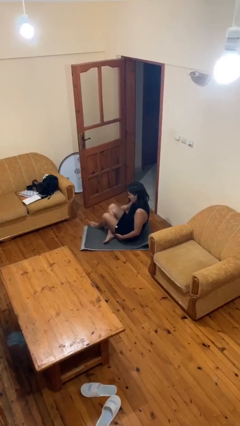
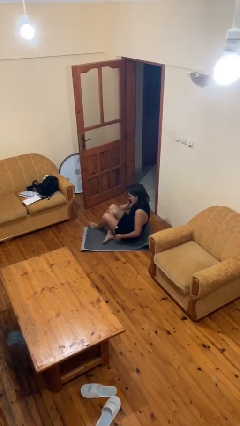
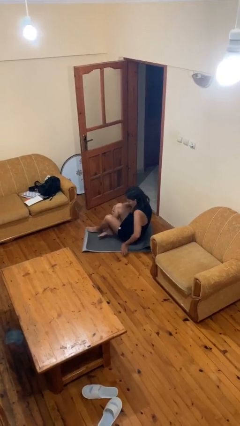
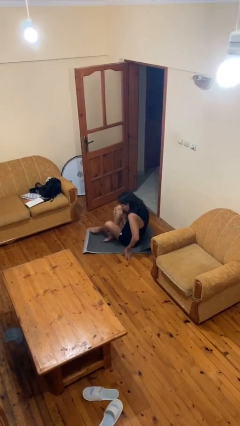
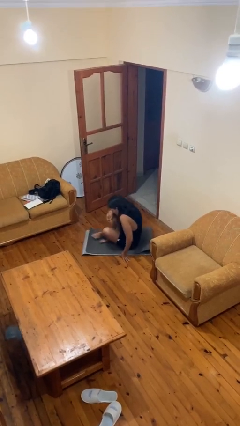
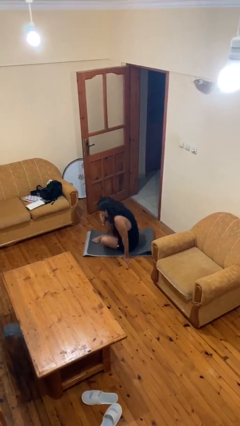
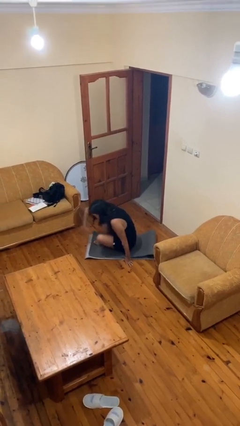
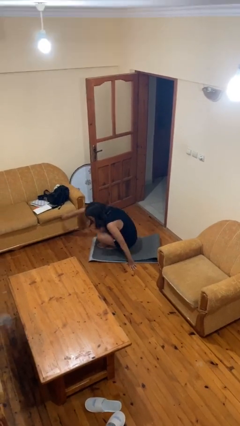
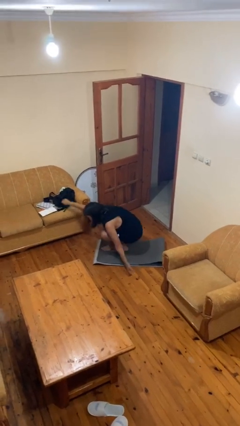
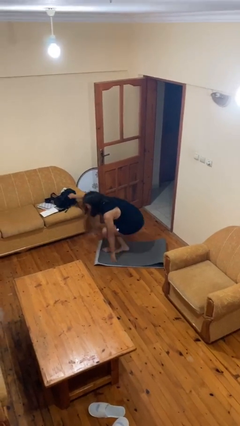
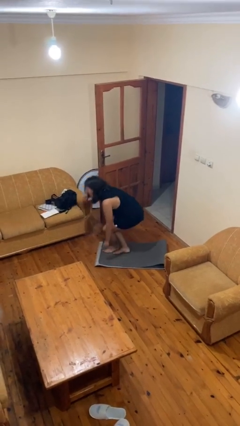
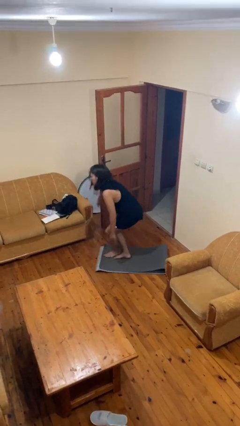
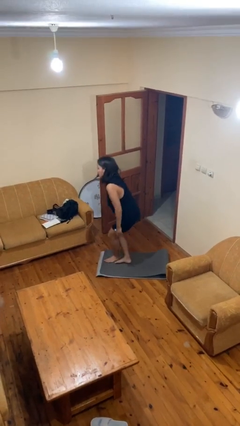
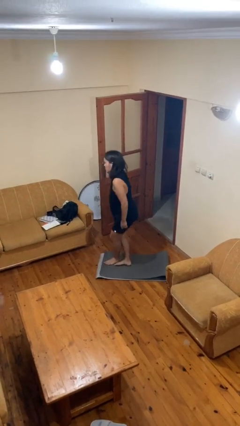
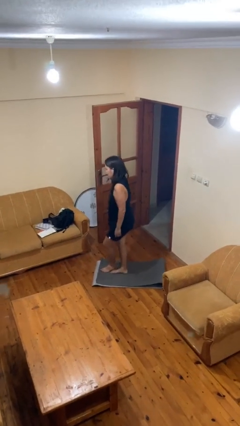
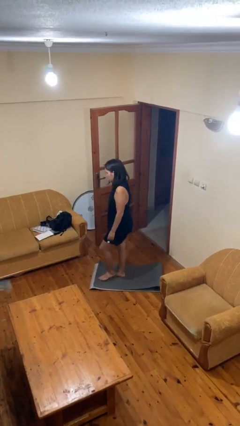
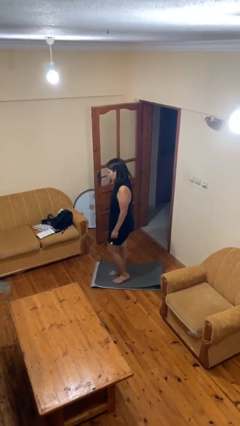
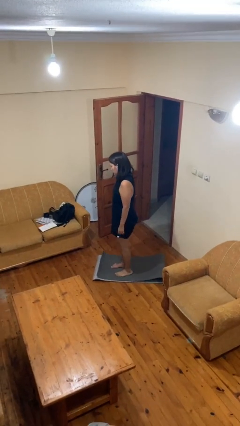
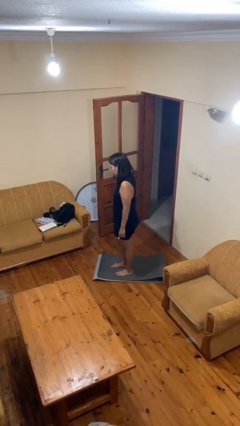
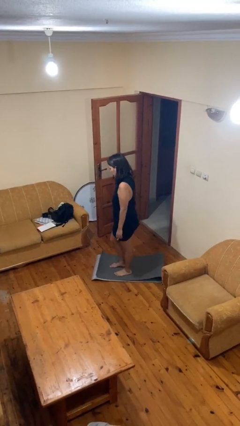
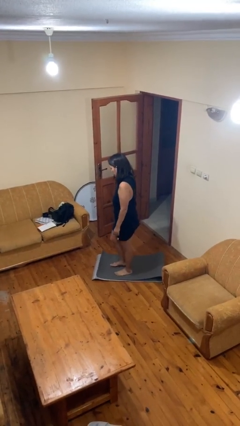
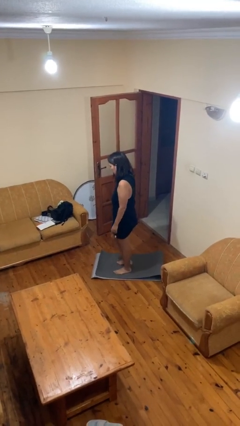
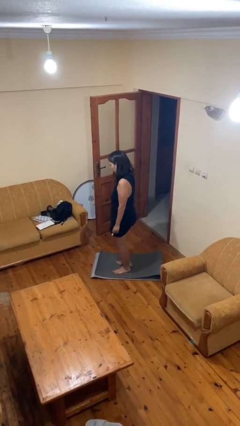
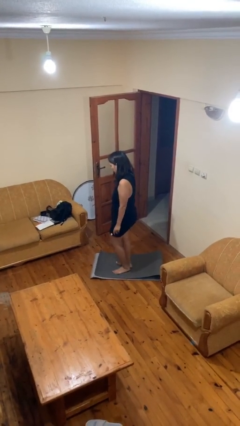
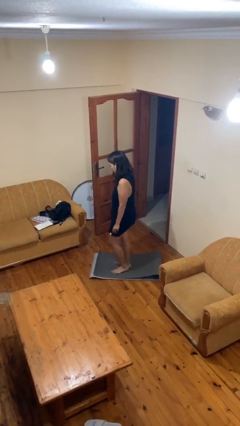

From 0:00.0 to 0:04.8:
person stands up from floor

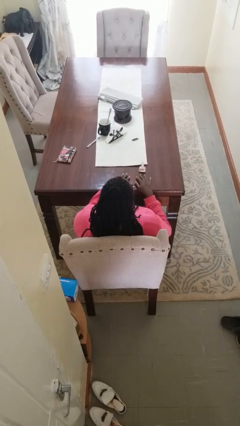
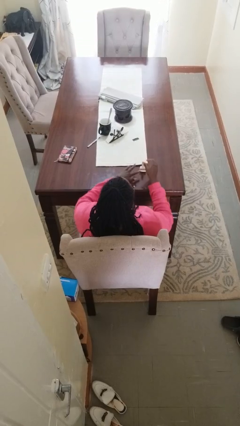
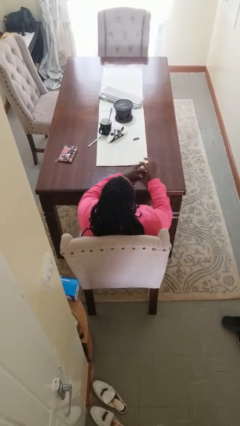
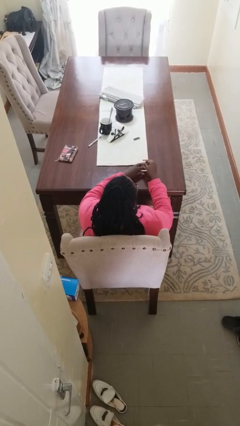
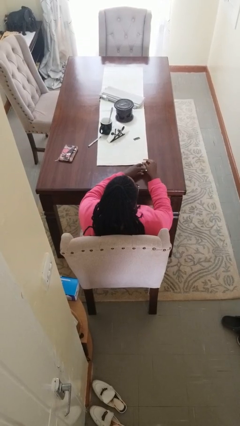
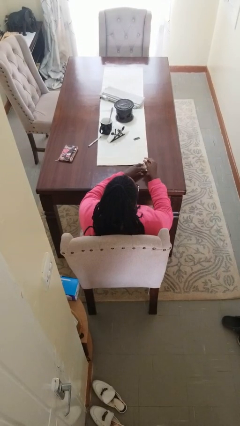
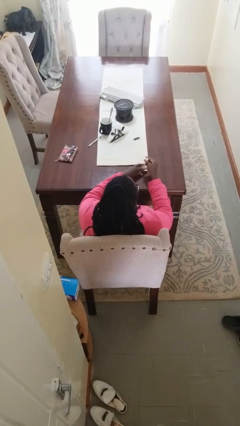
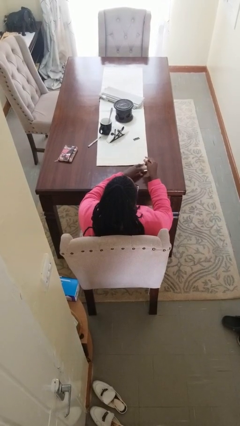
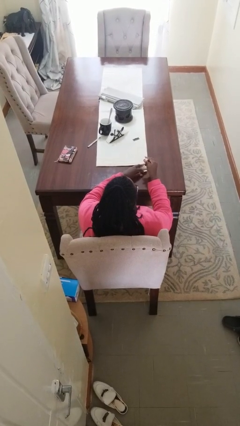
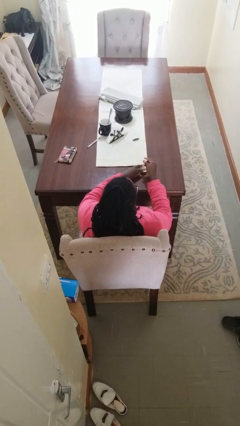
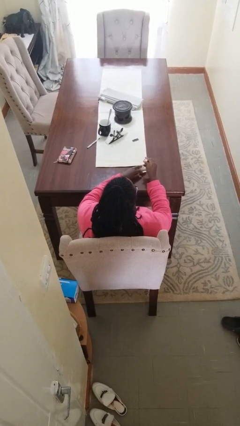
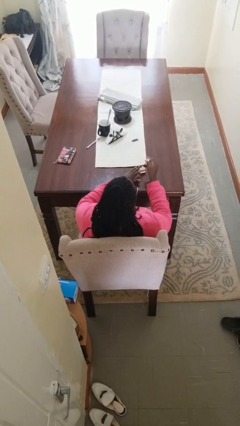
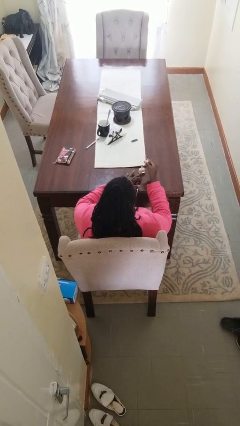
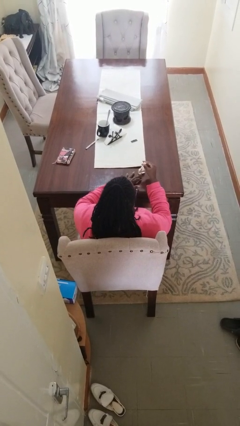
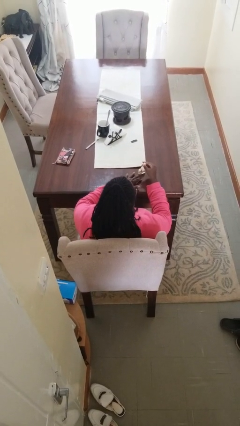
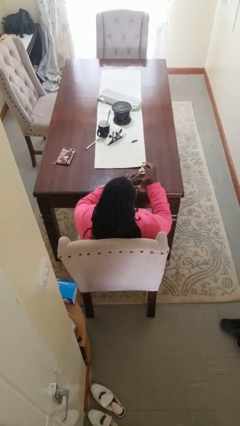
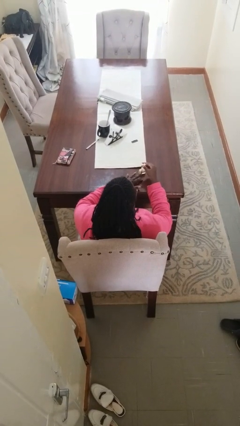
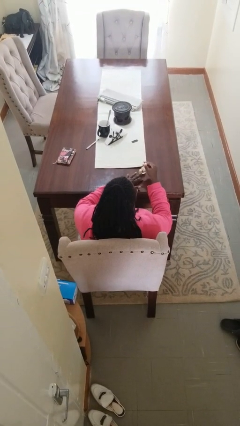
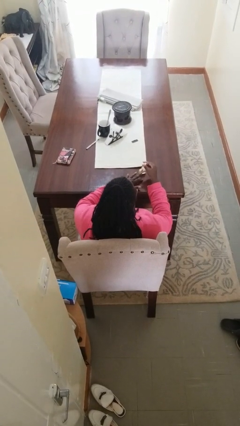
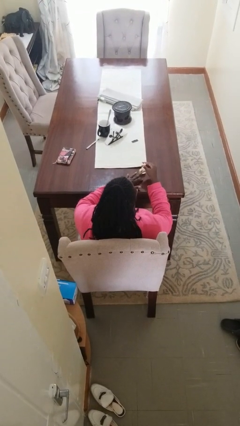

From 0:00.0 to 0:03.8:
person paints fingernails

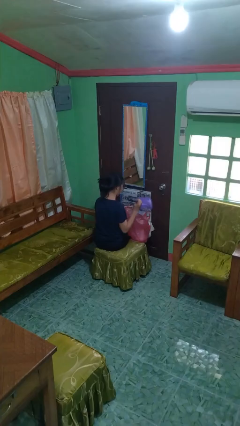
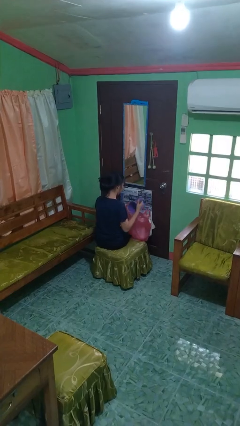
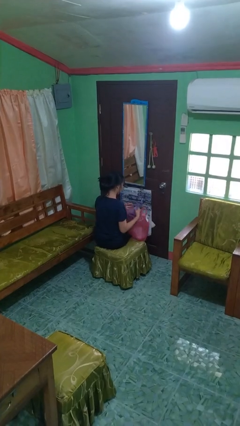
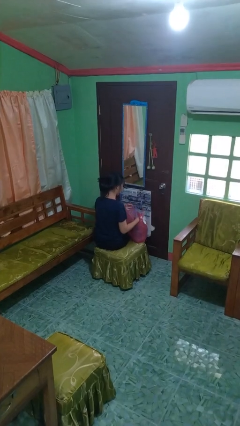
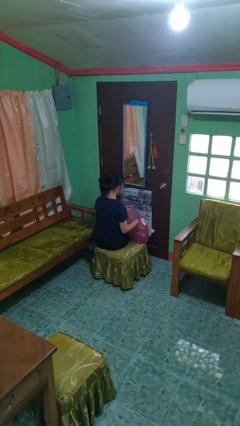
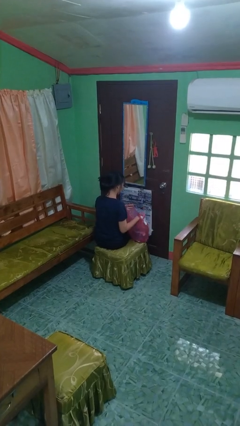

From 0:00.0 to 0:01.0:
person puts object into bag

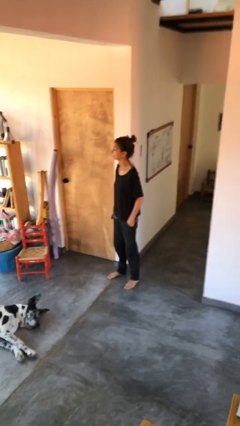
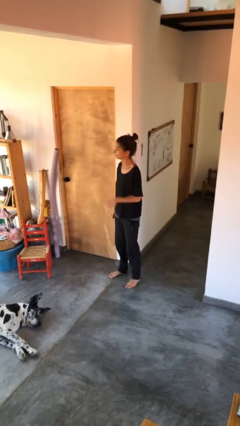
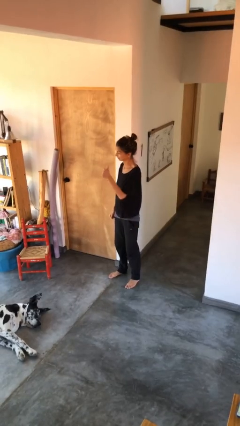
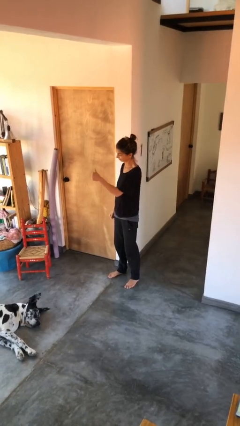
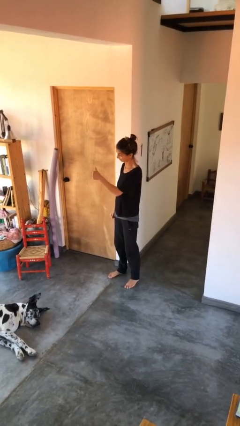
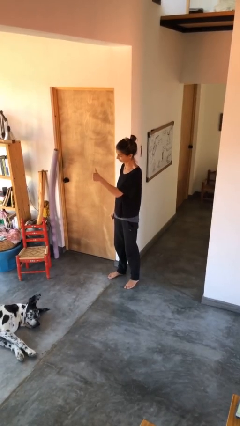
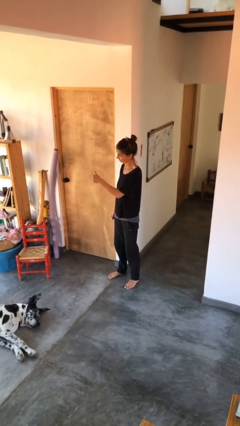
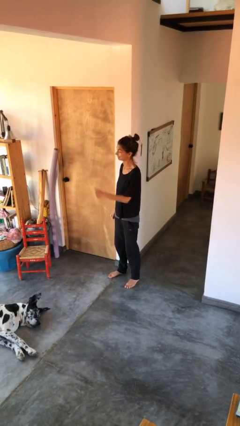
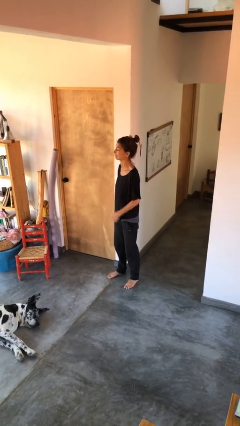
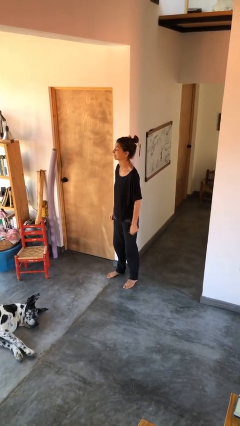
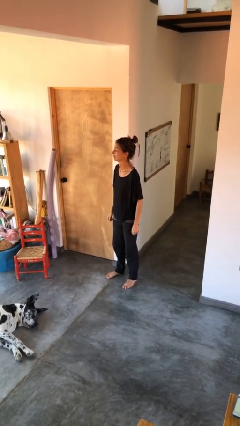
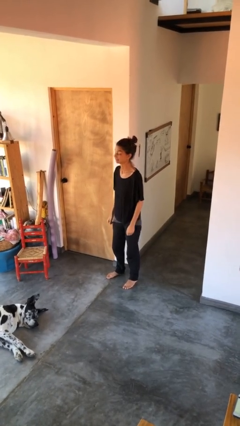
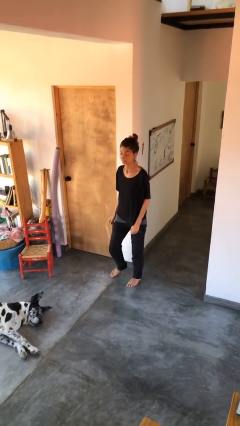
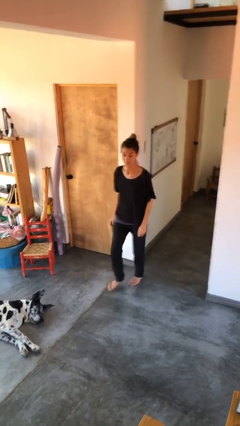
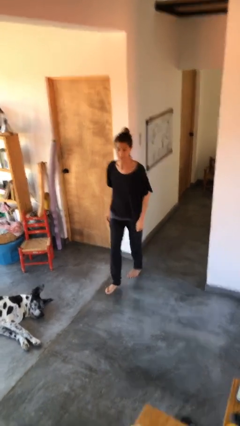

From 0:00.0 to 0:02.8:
person gestures thumbs up

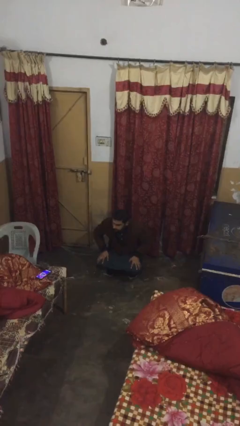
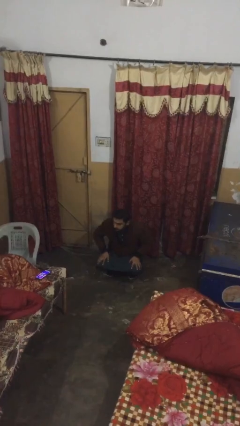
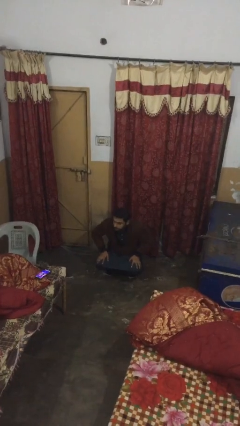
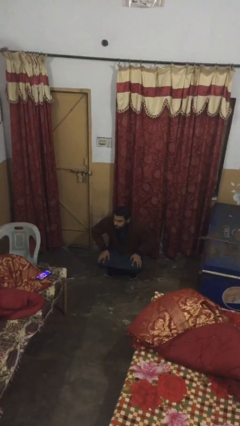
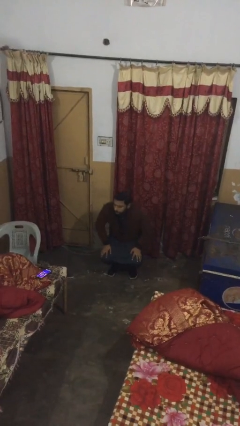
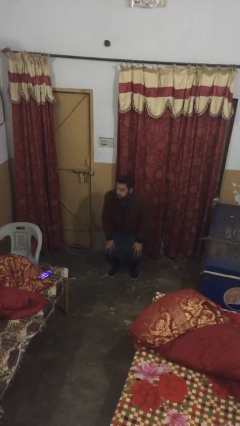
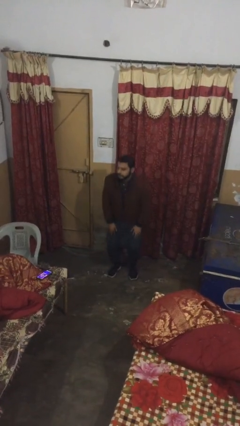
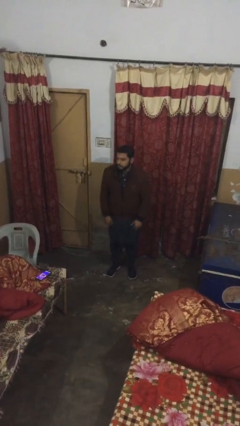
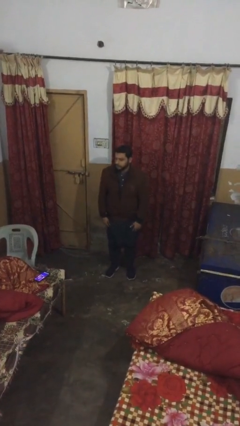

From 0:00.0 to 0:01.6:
person stands up

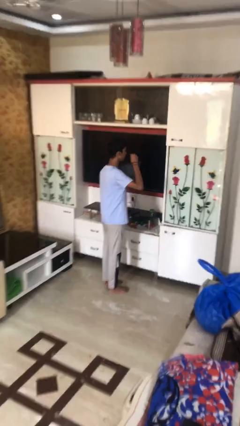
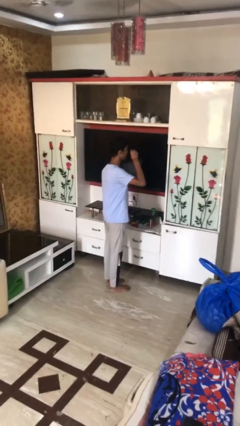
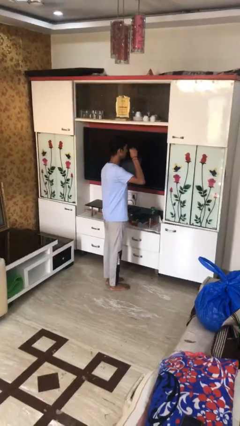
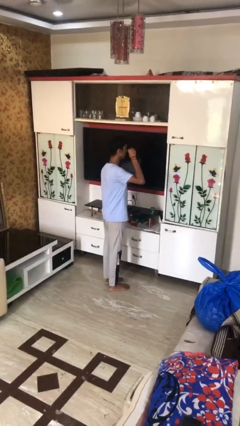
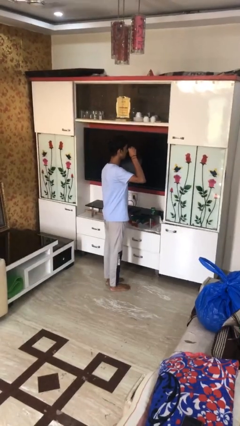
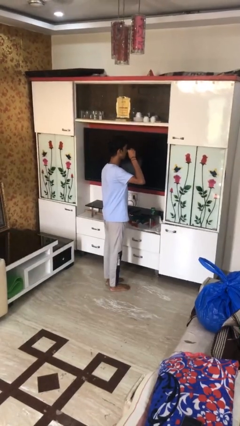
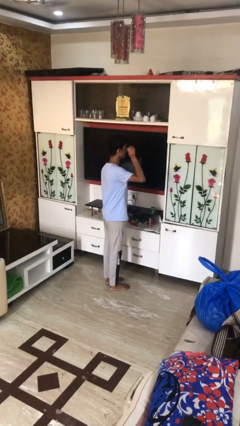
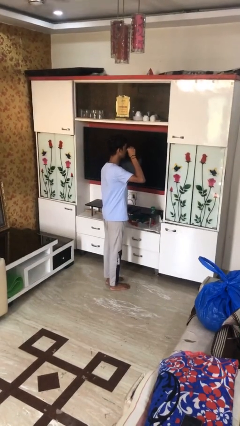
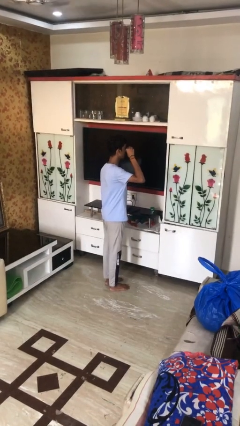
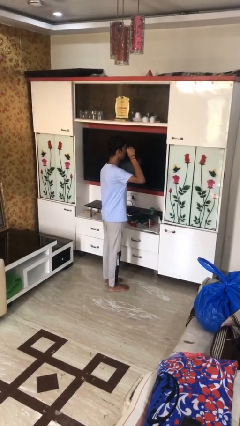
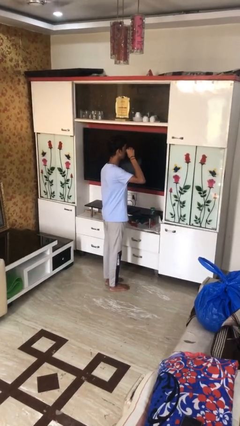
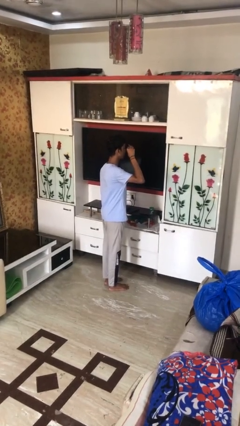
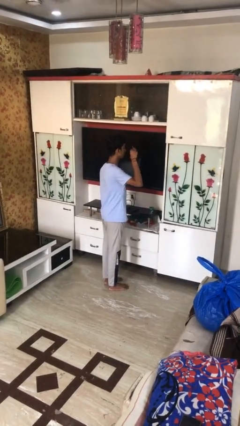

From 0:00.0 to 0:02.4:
person applies eye makeup

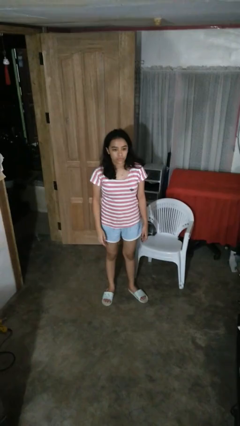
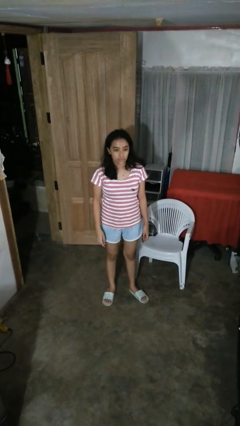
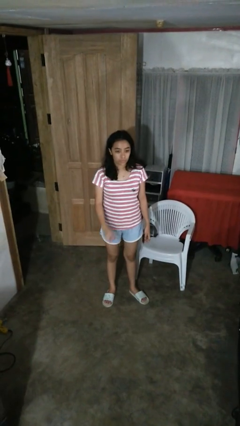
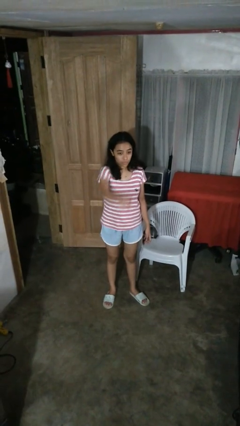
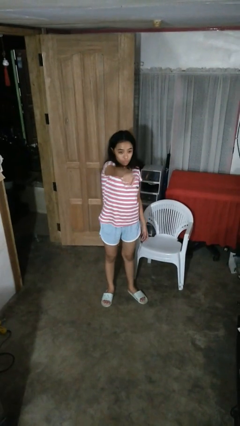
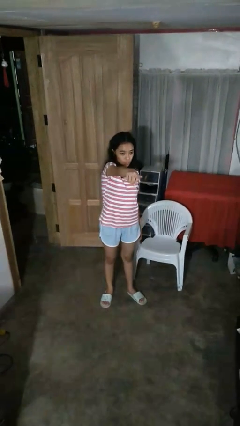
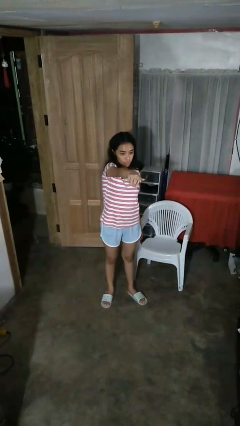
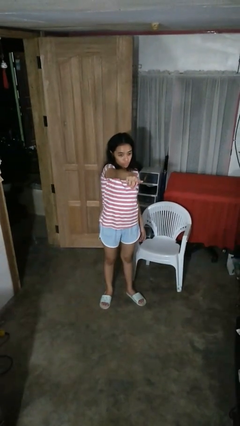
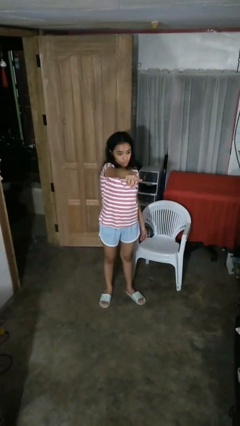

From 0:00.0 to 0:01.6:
person points at person
